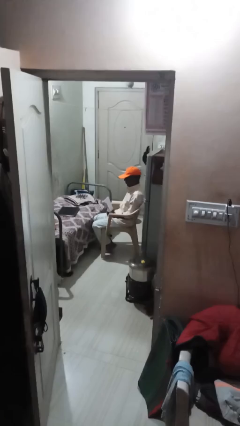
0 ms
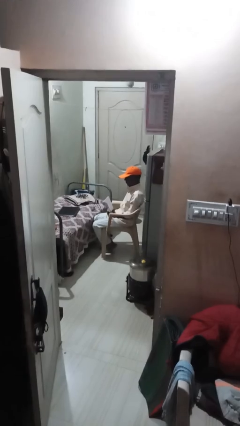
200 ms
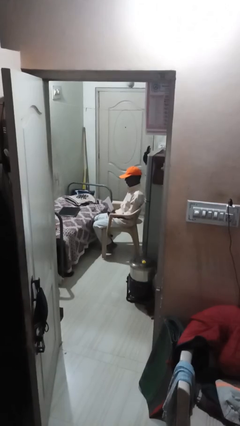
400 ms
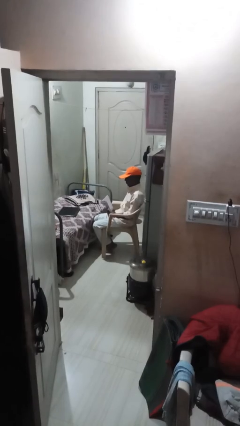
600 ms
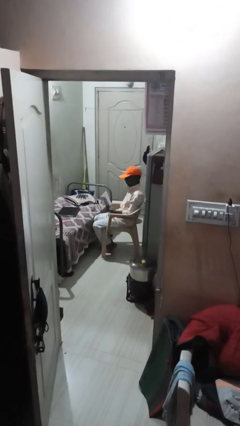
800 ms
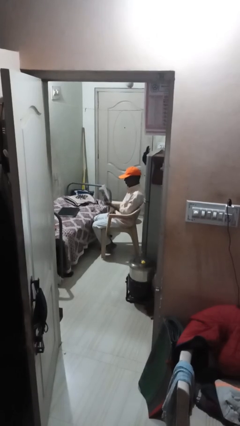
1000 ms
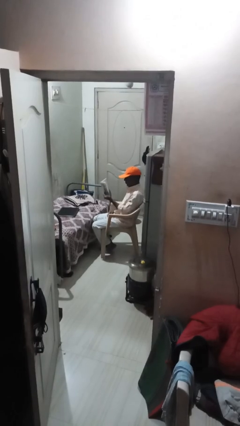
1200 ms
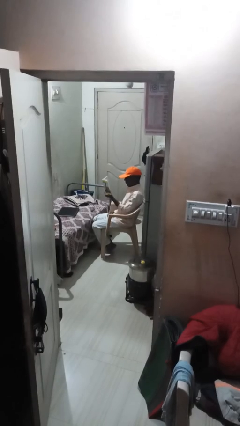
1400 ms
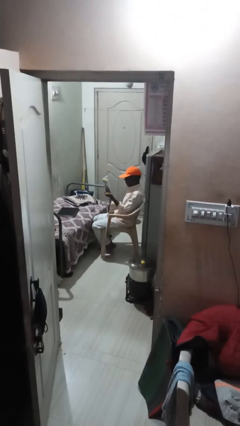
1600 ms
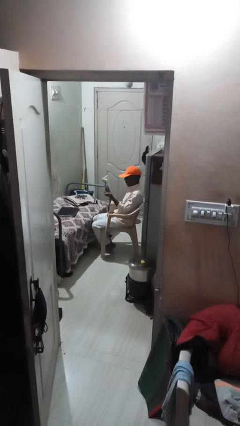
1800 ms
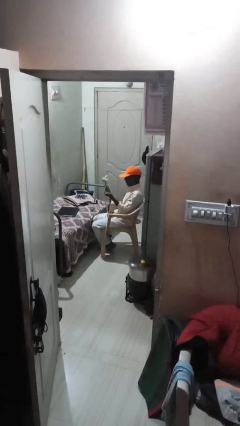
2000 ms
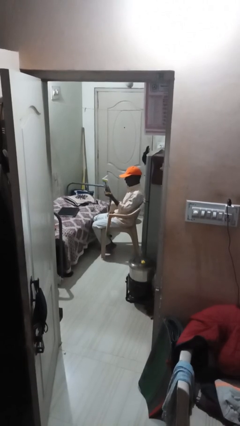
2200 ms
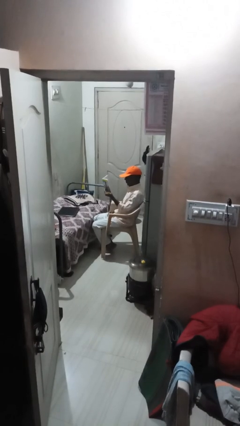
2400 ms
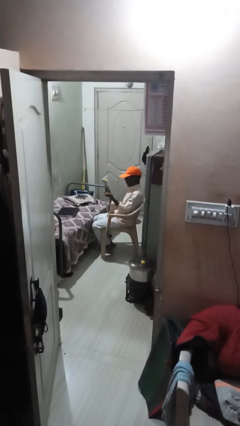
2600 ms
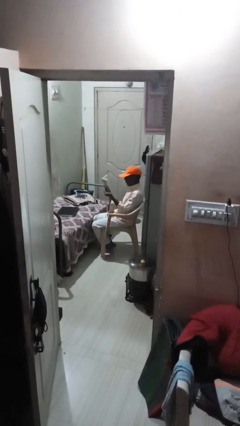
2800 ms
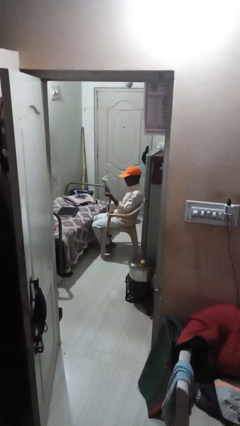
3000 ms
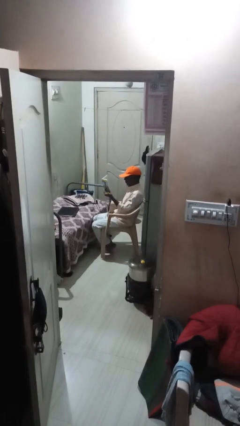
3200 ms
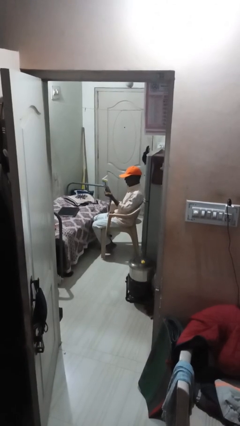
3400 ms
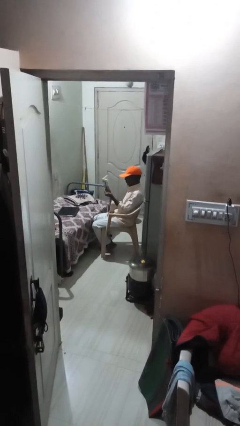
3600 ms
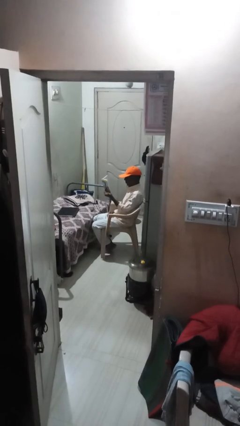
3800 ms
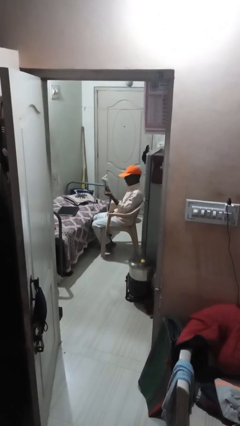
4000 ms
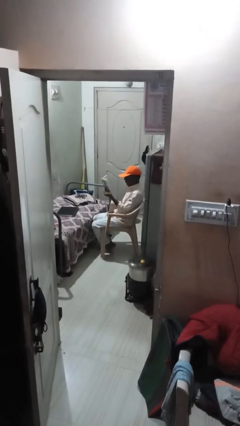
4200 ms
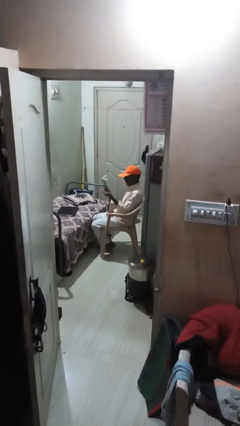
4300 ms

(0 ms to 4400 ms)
person reads document

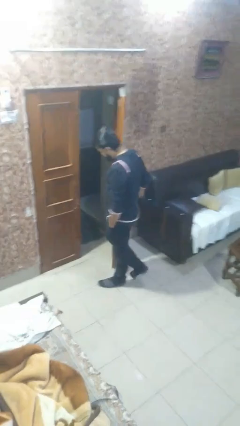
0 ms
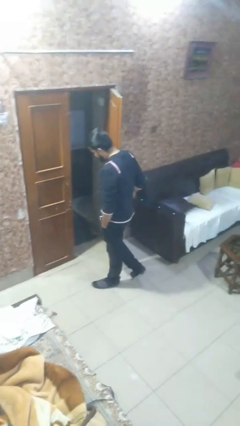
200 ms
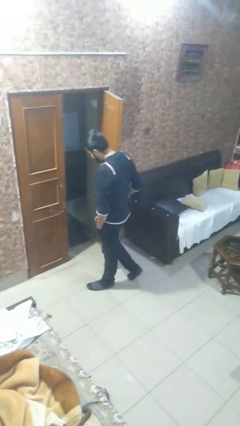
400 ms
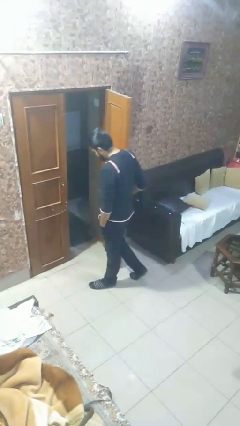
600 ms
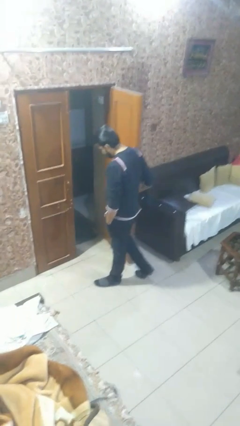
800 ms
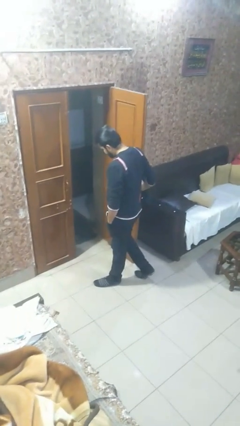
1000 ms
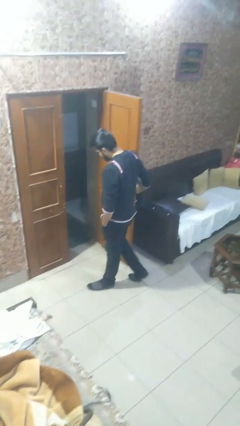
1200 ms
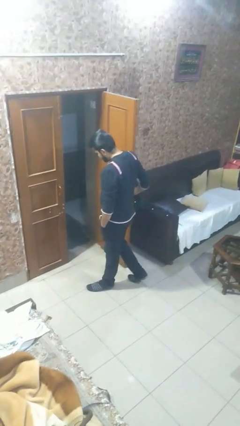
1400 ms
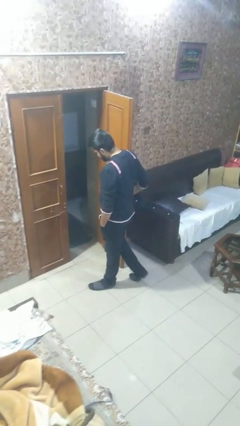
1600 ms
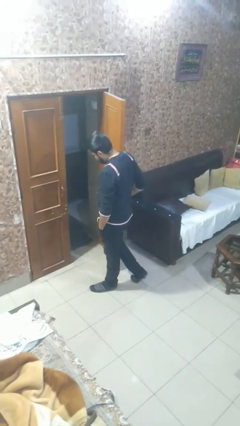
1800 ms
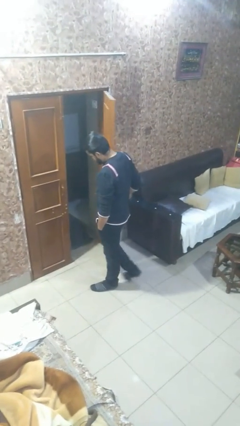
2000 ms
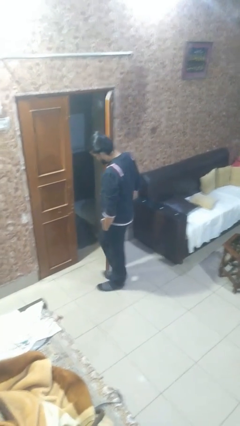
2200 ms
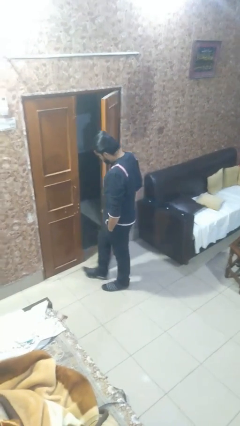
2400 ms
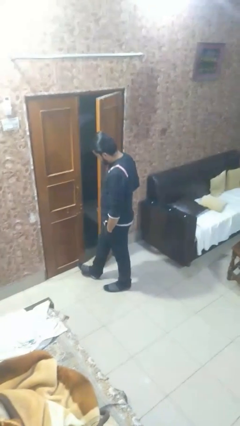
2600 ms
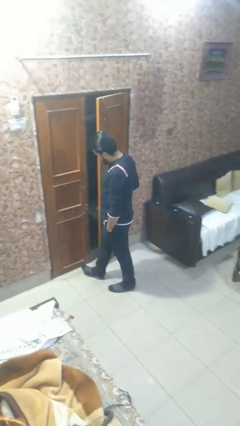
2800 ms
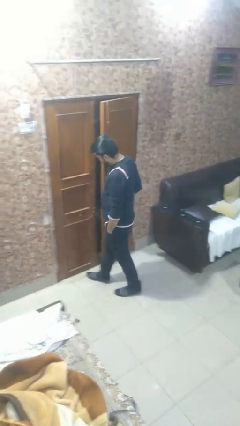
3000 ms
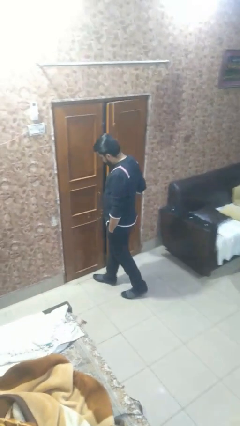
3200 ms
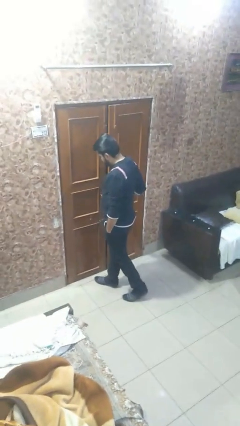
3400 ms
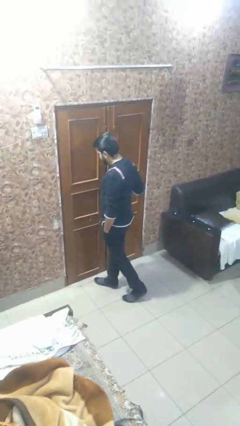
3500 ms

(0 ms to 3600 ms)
person opens facility door

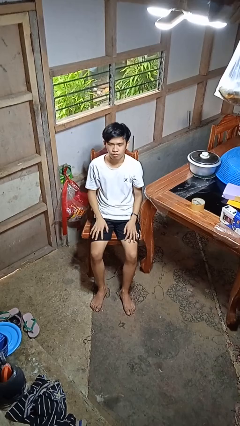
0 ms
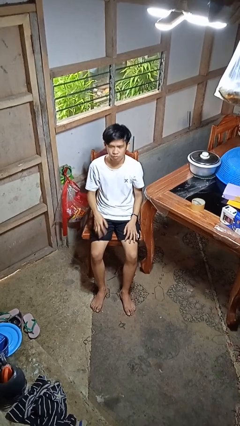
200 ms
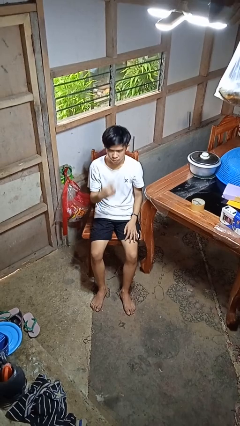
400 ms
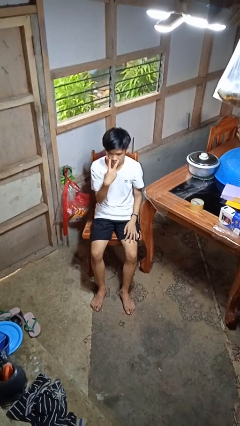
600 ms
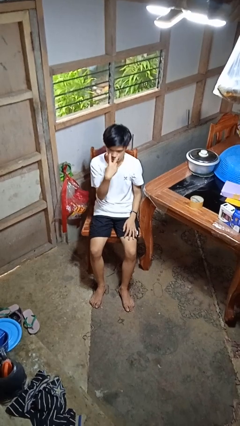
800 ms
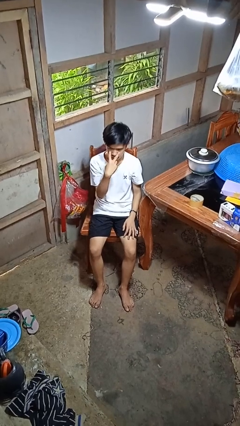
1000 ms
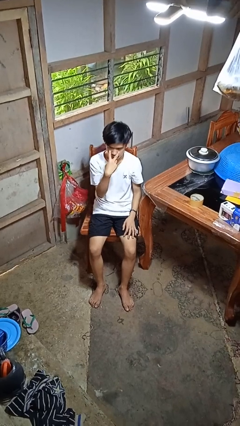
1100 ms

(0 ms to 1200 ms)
person gestures watch closely

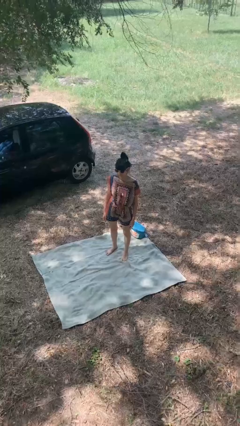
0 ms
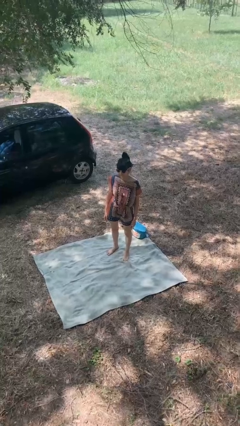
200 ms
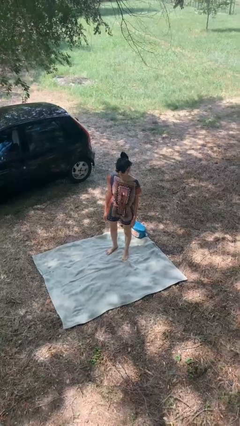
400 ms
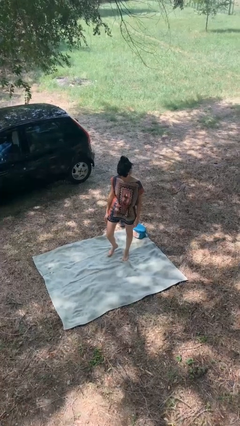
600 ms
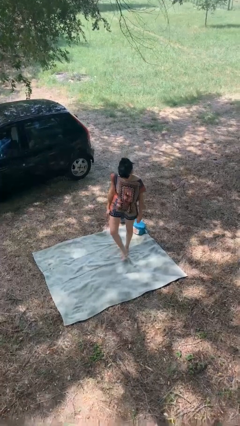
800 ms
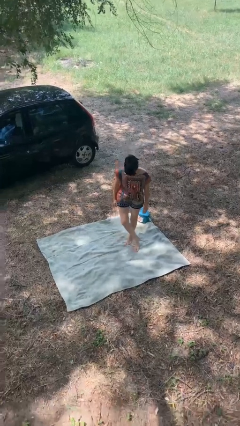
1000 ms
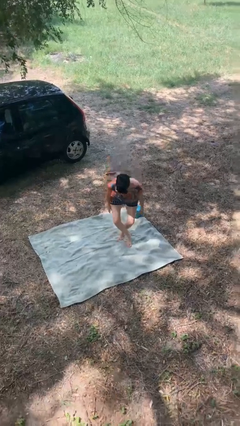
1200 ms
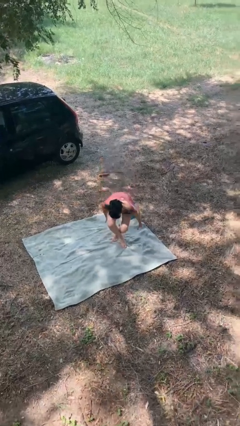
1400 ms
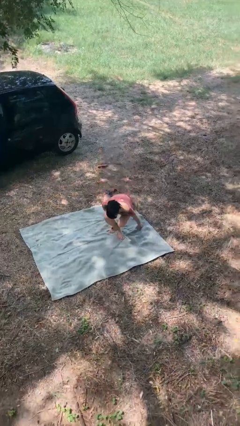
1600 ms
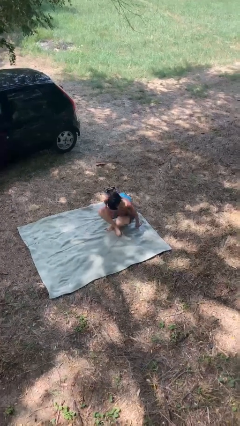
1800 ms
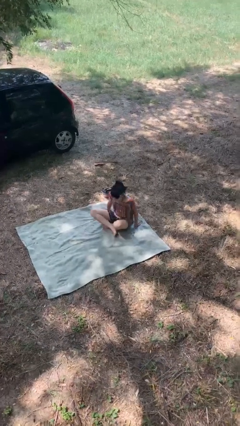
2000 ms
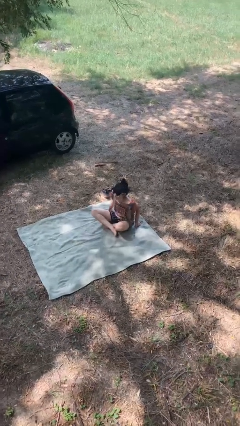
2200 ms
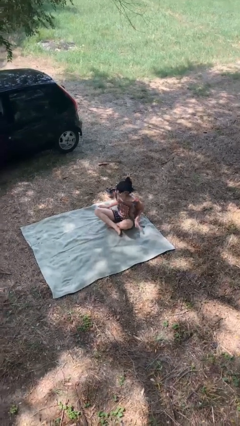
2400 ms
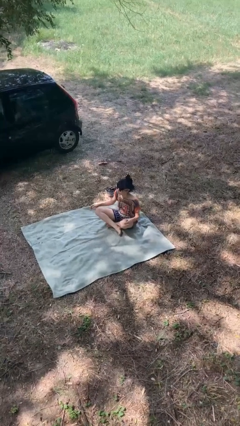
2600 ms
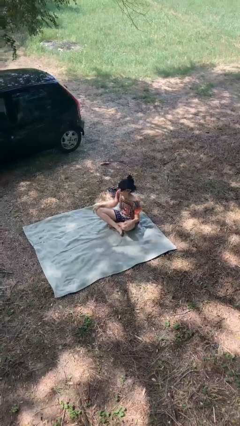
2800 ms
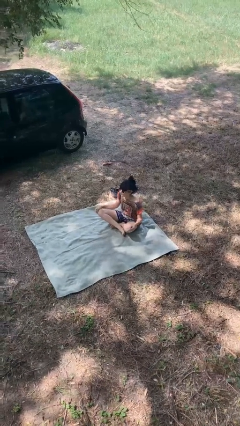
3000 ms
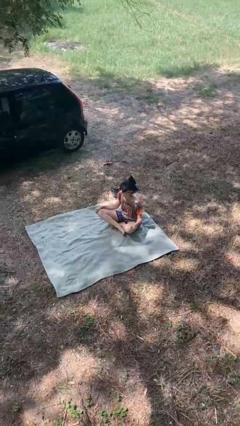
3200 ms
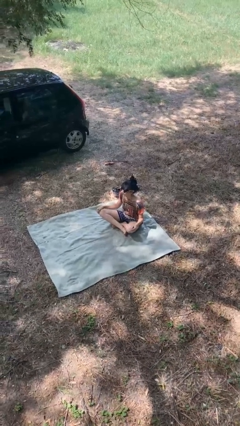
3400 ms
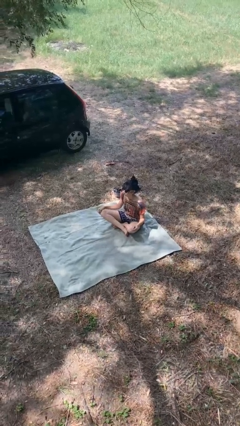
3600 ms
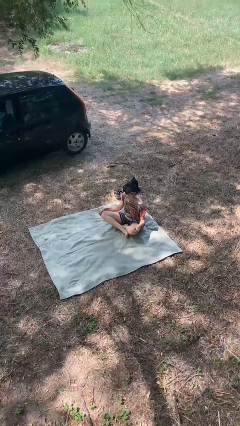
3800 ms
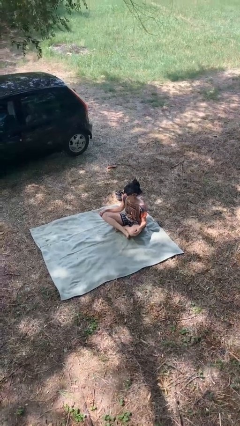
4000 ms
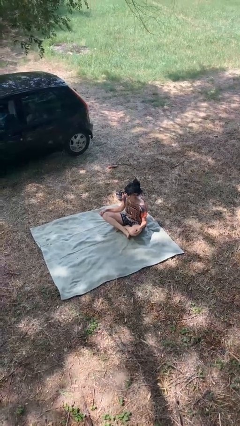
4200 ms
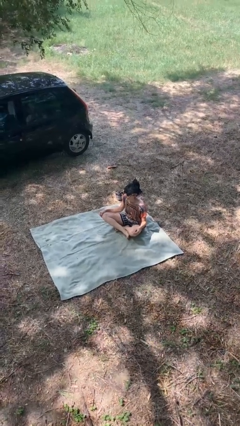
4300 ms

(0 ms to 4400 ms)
person sits crisscross

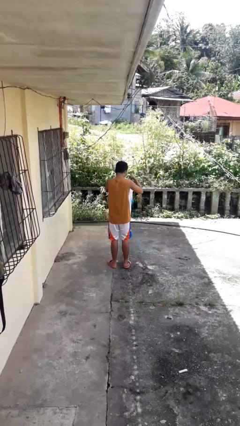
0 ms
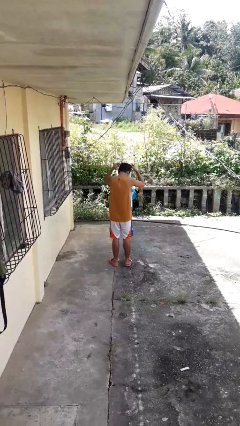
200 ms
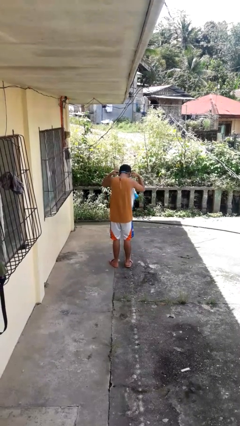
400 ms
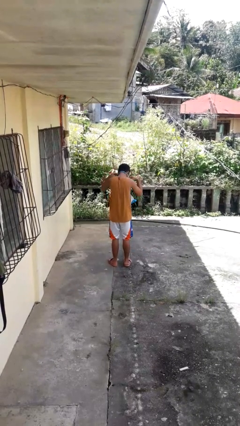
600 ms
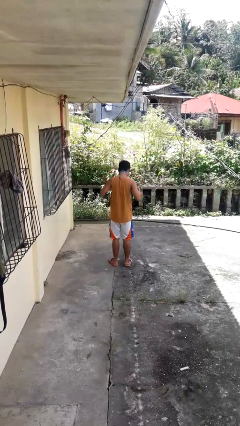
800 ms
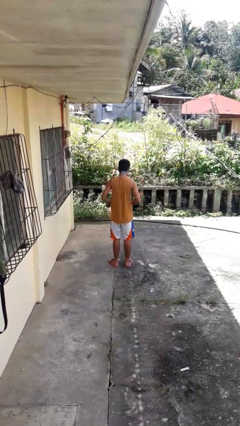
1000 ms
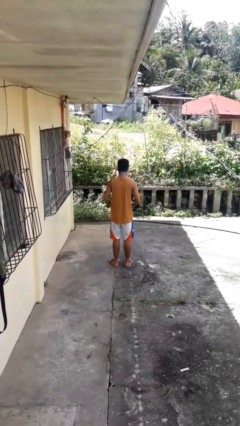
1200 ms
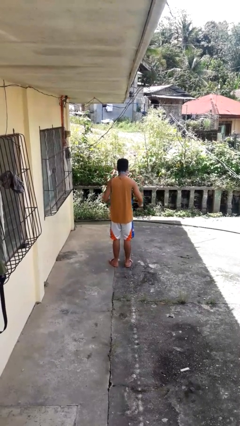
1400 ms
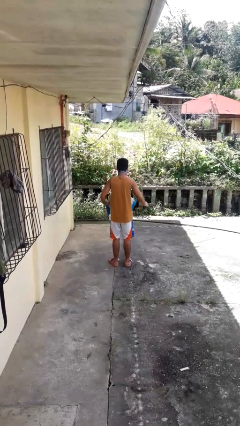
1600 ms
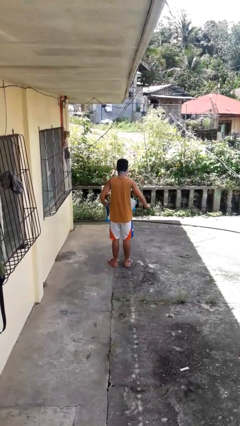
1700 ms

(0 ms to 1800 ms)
person puts on apron

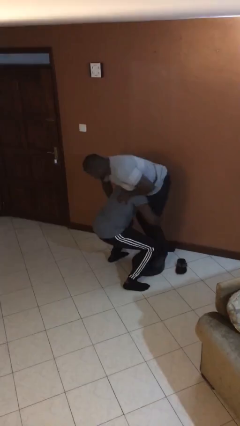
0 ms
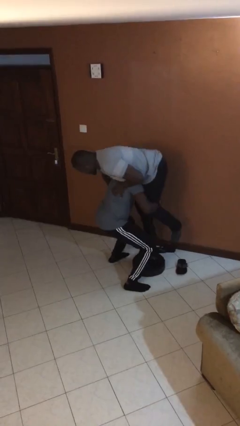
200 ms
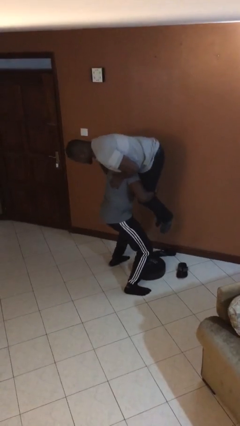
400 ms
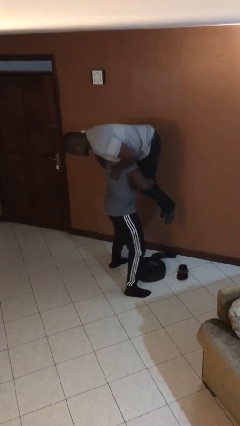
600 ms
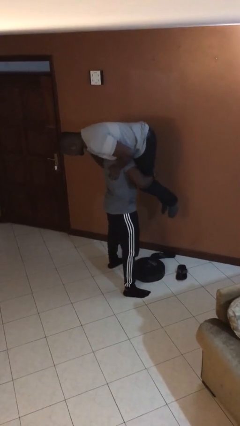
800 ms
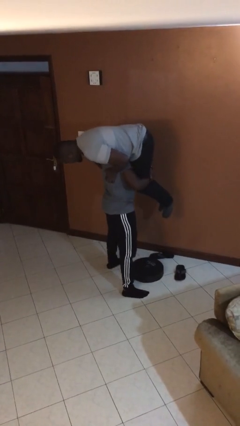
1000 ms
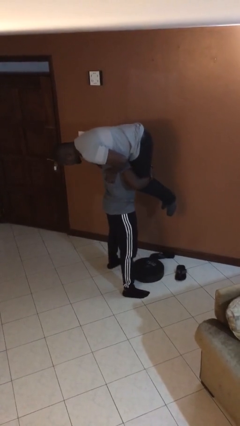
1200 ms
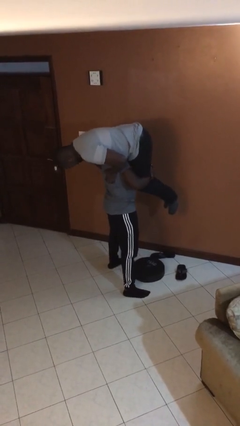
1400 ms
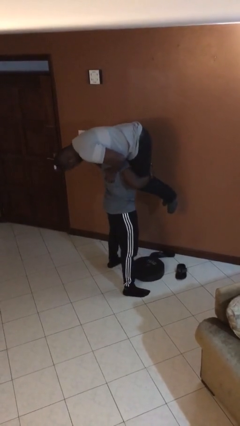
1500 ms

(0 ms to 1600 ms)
person carries person over shoulder

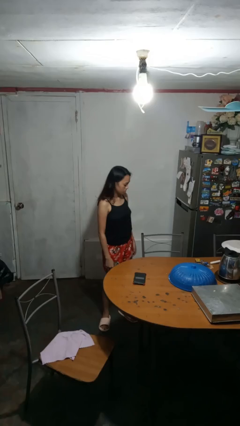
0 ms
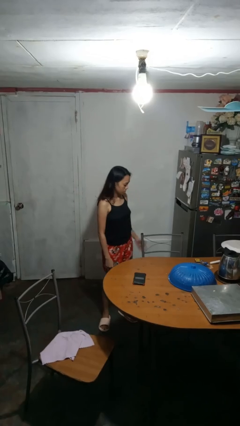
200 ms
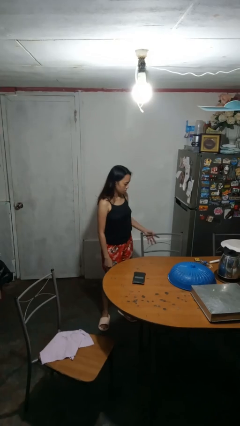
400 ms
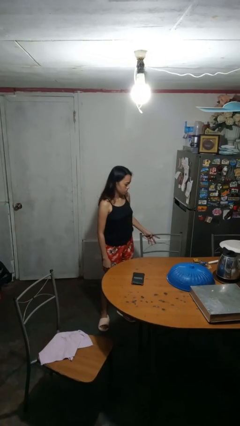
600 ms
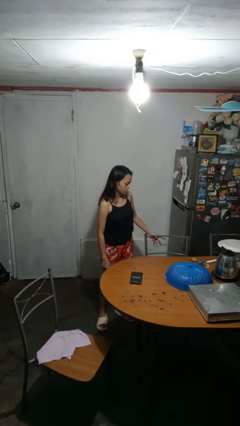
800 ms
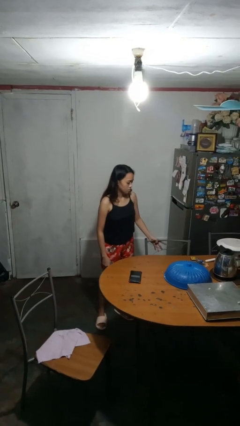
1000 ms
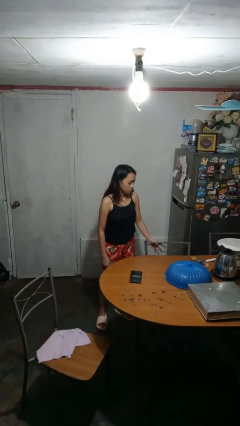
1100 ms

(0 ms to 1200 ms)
person pushes in chair
